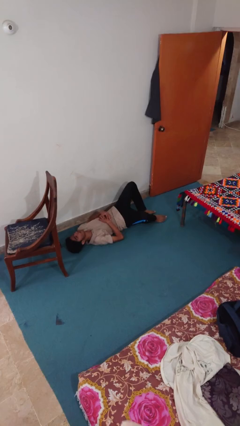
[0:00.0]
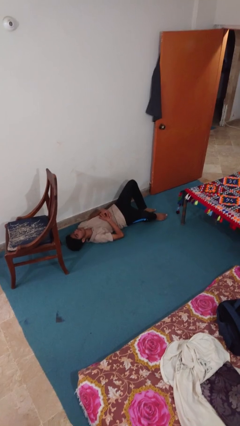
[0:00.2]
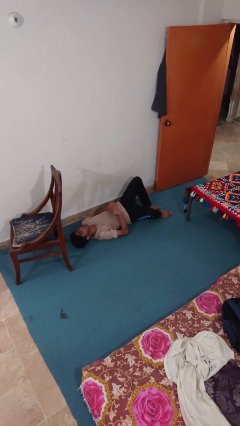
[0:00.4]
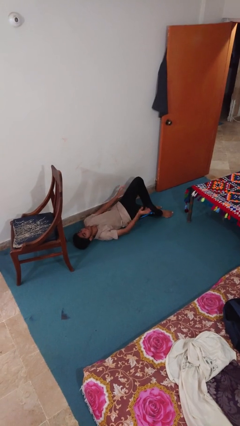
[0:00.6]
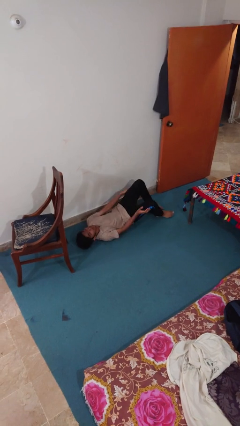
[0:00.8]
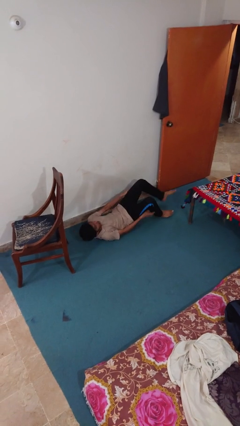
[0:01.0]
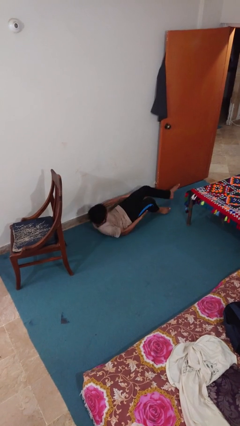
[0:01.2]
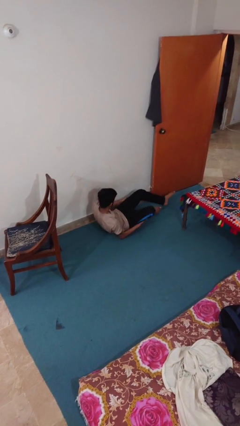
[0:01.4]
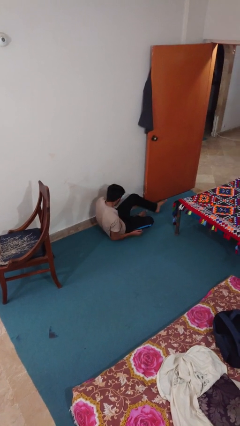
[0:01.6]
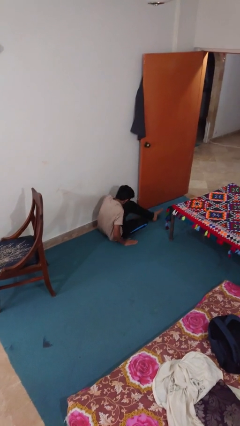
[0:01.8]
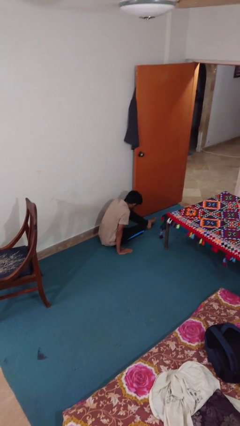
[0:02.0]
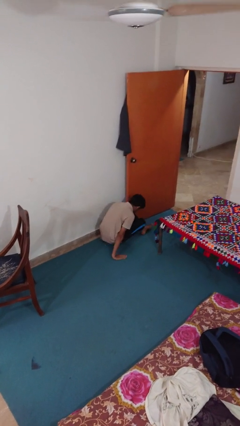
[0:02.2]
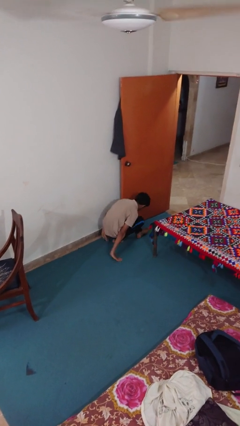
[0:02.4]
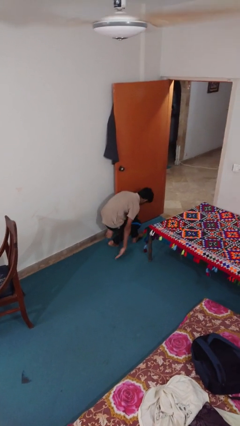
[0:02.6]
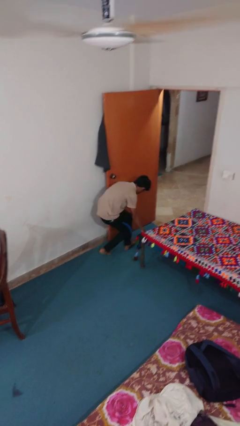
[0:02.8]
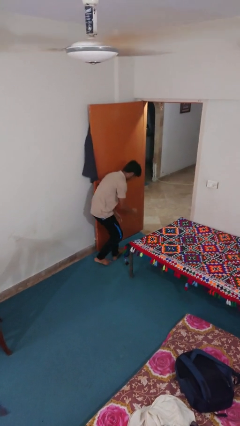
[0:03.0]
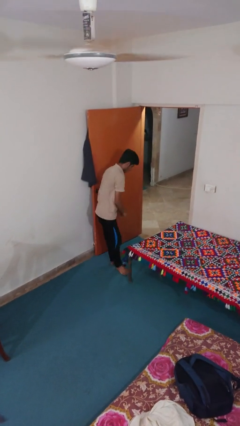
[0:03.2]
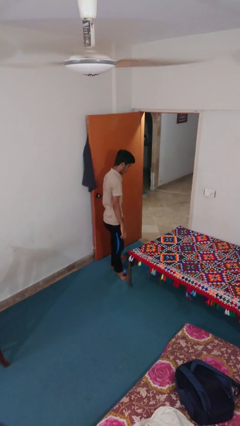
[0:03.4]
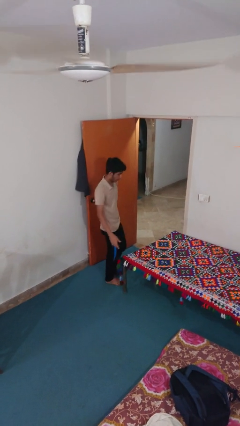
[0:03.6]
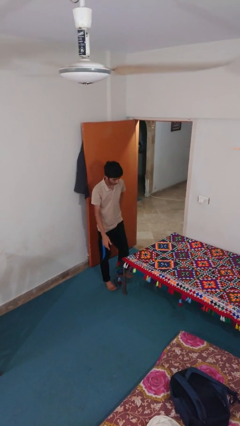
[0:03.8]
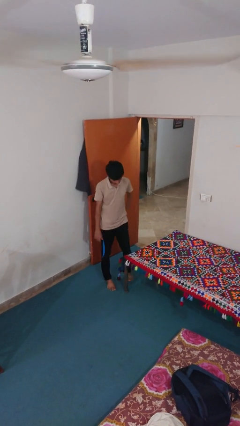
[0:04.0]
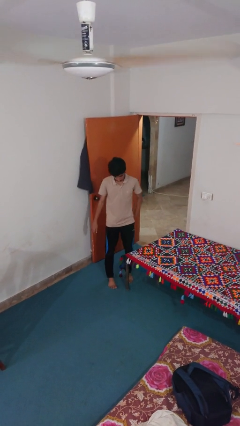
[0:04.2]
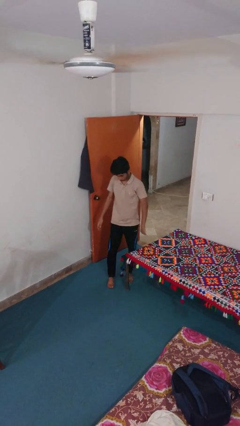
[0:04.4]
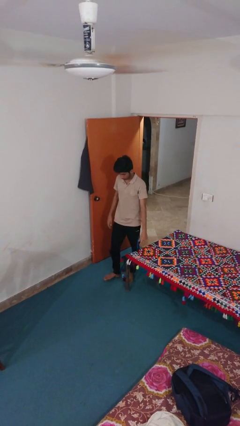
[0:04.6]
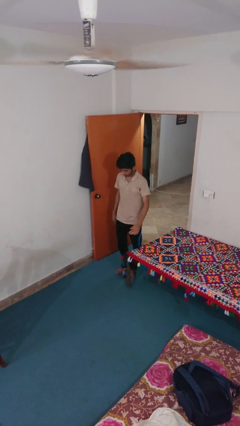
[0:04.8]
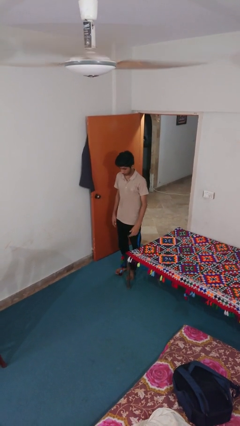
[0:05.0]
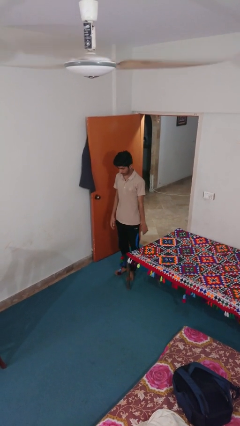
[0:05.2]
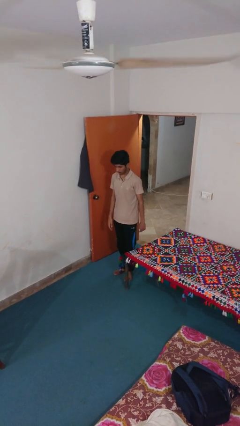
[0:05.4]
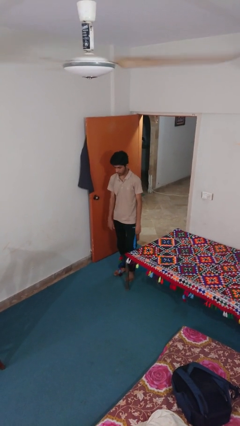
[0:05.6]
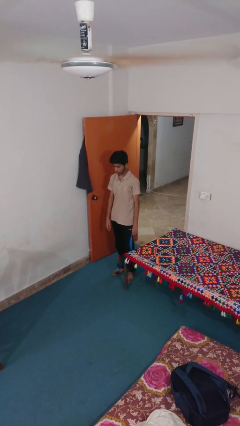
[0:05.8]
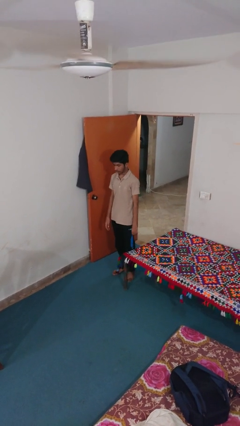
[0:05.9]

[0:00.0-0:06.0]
person stands up from floor

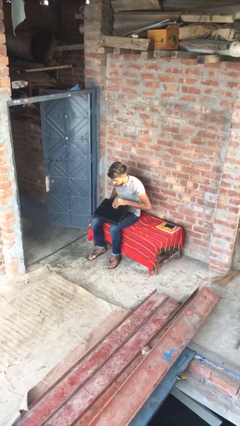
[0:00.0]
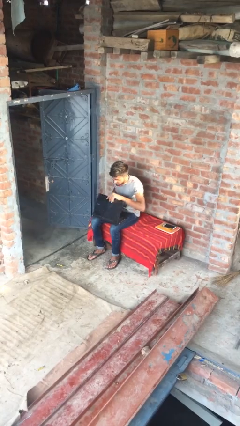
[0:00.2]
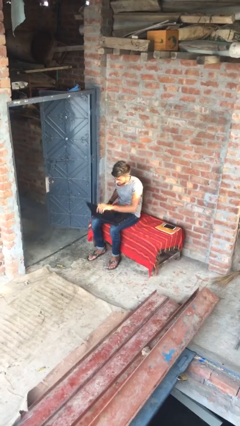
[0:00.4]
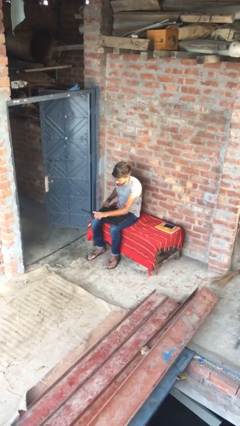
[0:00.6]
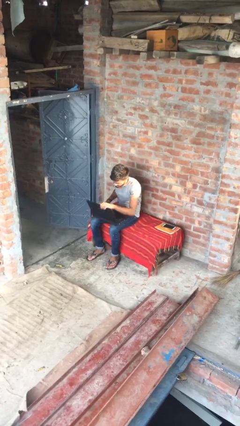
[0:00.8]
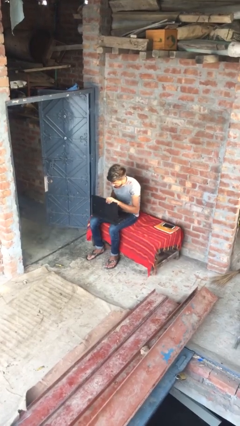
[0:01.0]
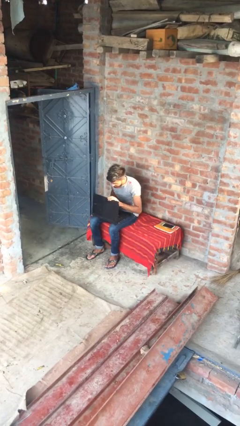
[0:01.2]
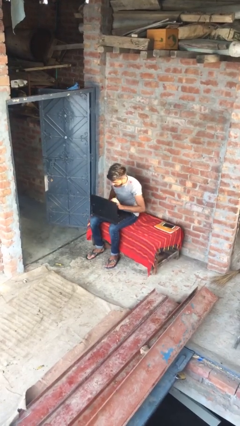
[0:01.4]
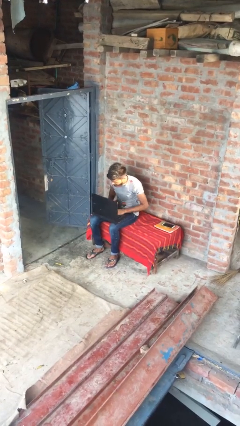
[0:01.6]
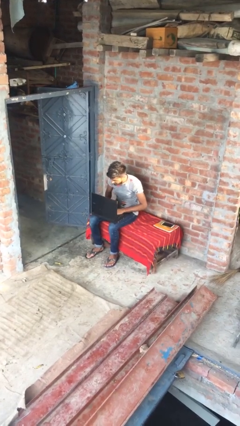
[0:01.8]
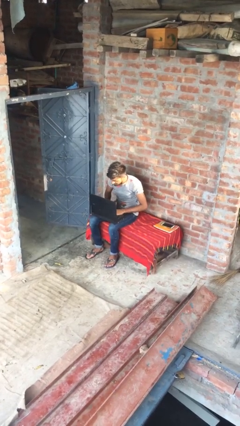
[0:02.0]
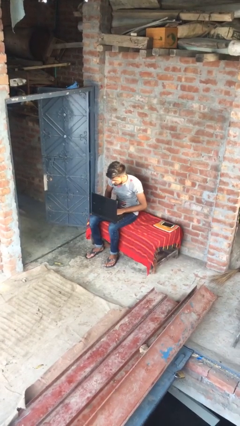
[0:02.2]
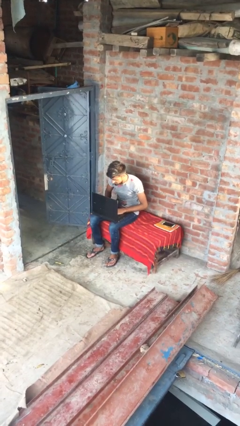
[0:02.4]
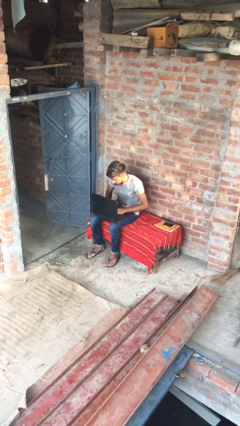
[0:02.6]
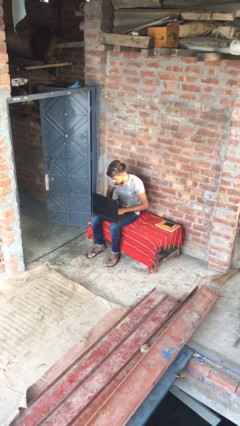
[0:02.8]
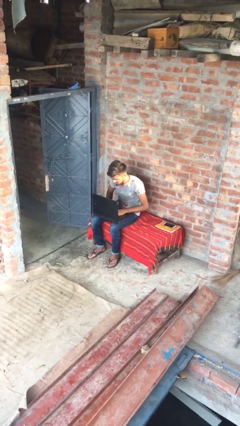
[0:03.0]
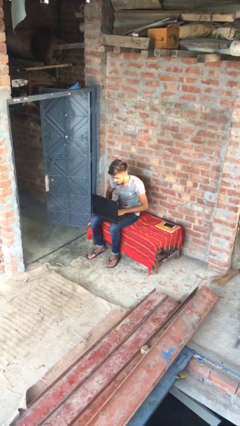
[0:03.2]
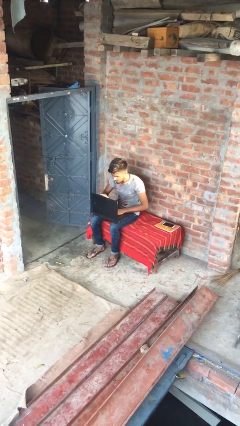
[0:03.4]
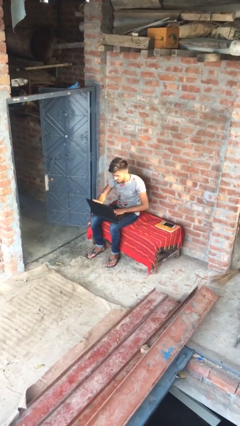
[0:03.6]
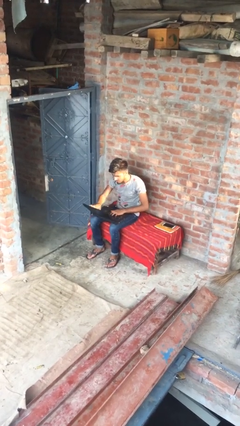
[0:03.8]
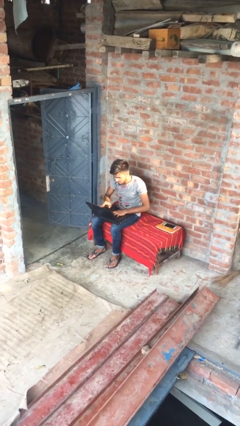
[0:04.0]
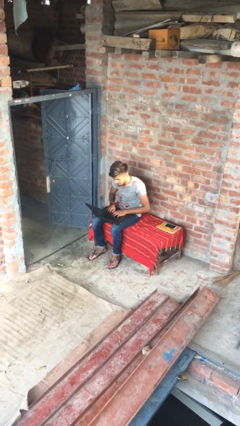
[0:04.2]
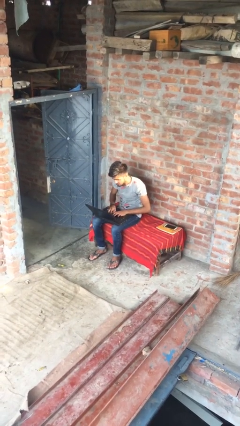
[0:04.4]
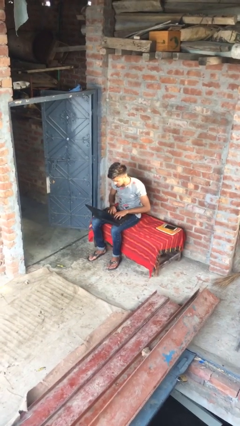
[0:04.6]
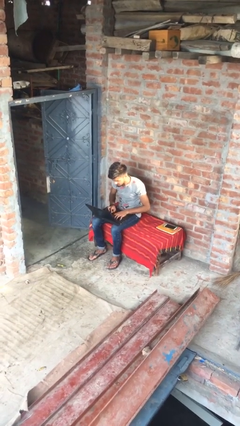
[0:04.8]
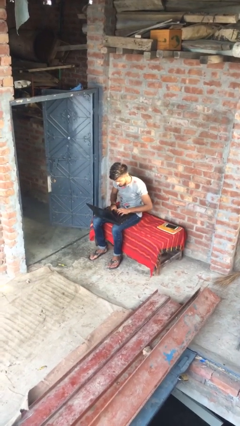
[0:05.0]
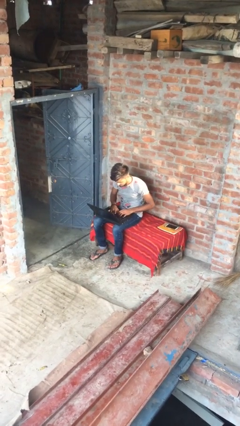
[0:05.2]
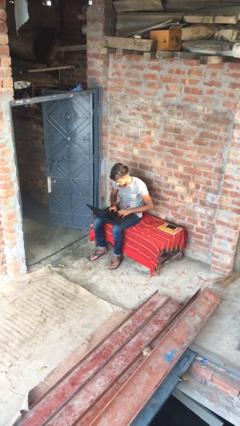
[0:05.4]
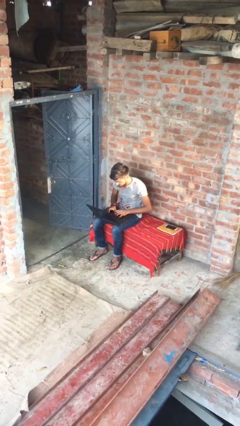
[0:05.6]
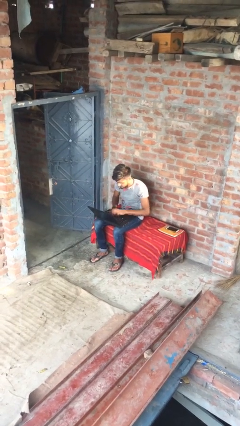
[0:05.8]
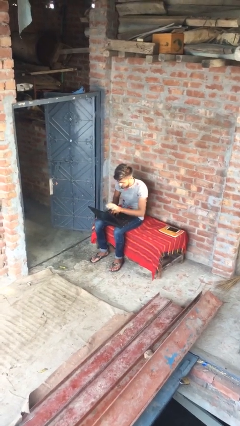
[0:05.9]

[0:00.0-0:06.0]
person interacts with laptop

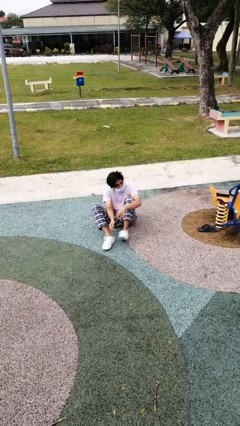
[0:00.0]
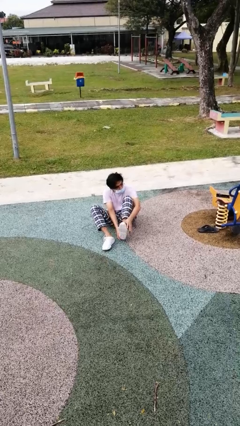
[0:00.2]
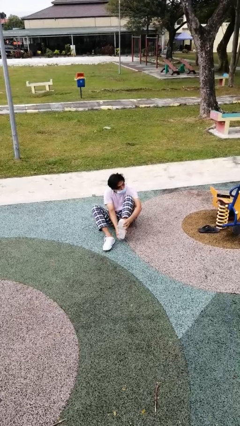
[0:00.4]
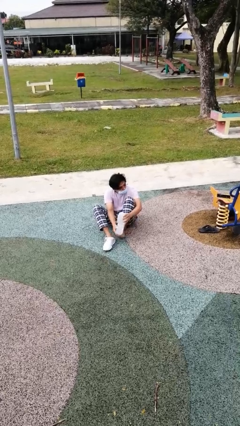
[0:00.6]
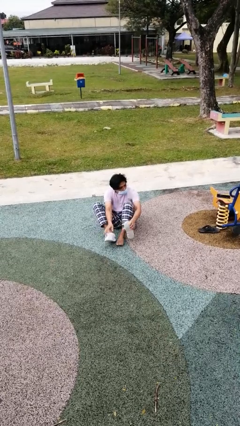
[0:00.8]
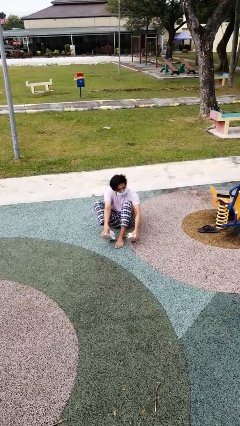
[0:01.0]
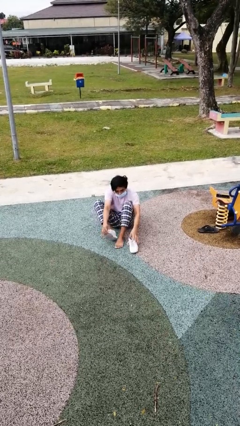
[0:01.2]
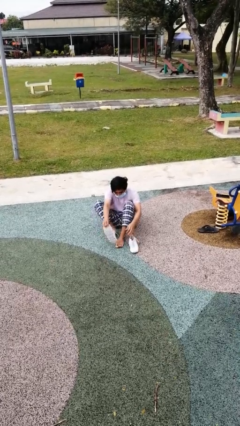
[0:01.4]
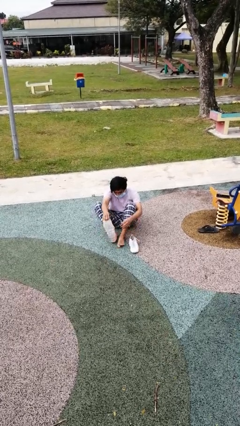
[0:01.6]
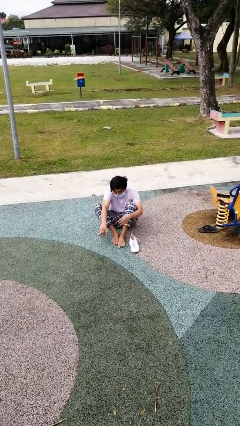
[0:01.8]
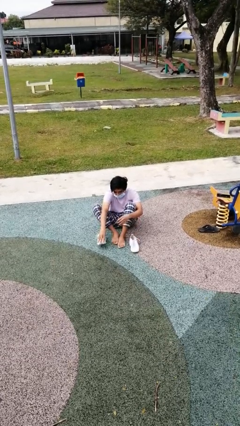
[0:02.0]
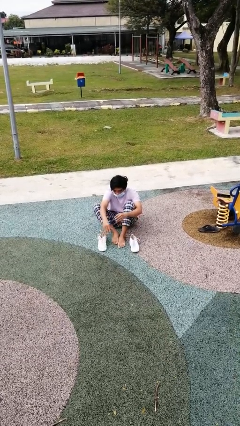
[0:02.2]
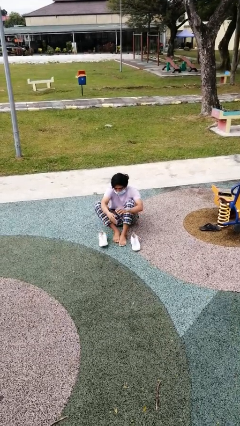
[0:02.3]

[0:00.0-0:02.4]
person takes off shoes

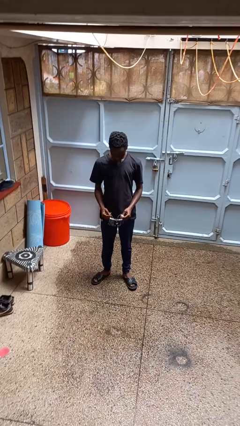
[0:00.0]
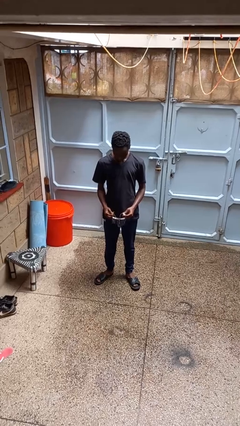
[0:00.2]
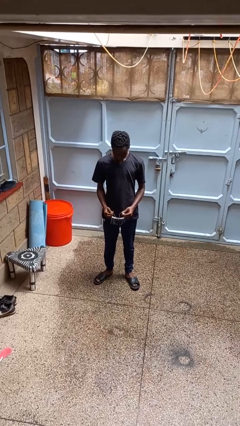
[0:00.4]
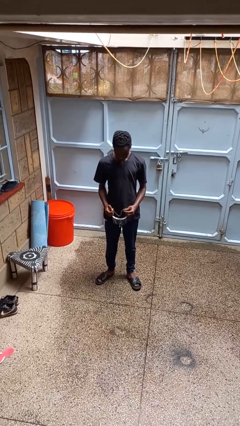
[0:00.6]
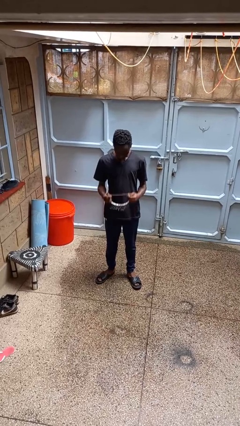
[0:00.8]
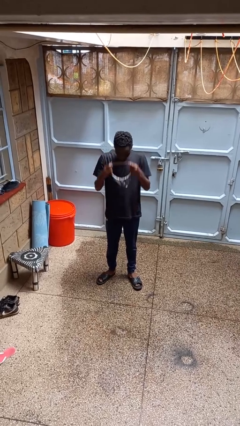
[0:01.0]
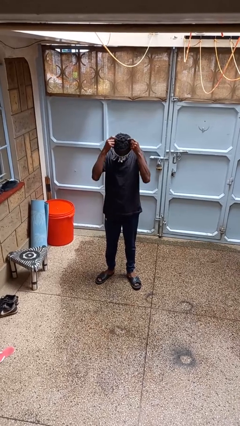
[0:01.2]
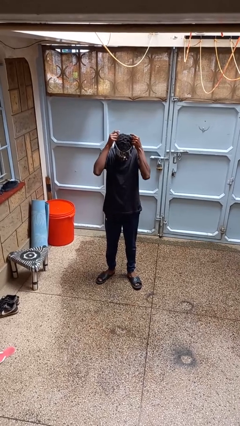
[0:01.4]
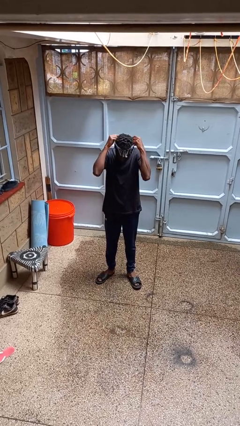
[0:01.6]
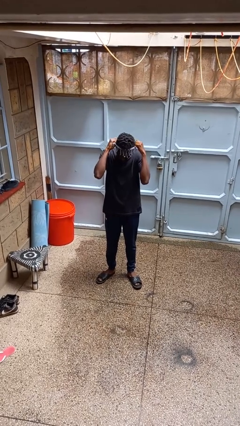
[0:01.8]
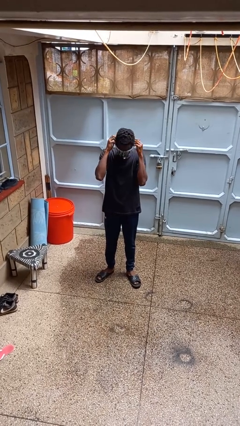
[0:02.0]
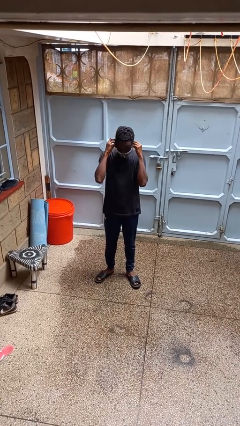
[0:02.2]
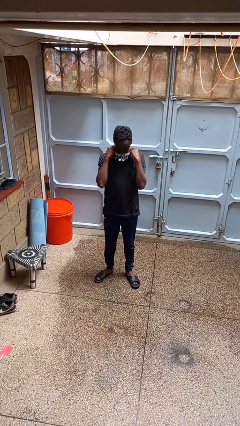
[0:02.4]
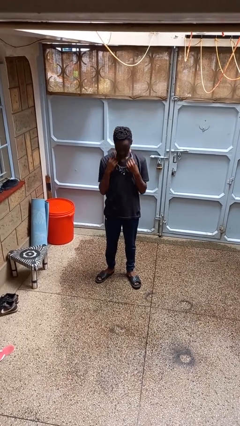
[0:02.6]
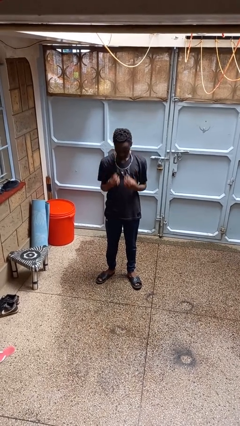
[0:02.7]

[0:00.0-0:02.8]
person puts on necklace

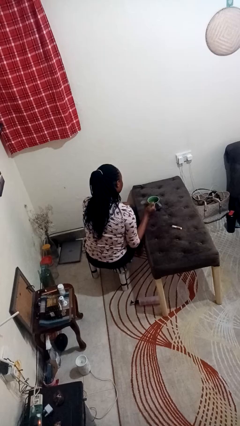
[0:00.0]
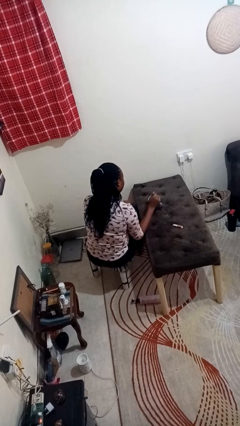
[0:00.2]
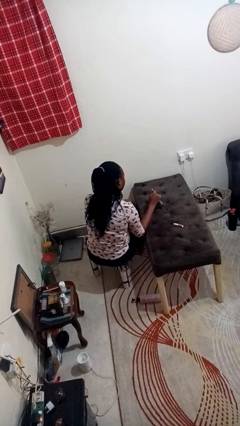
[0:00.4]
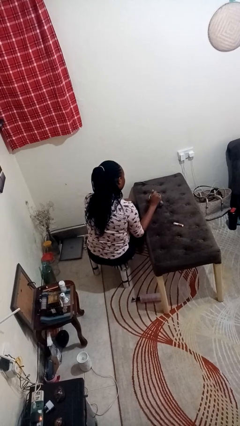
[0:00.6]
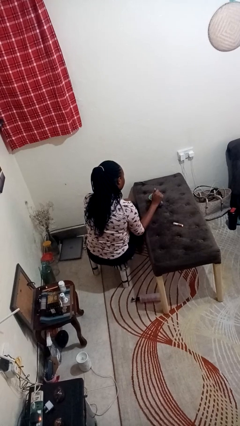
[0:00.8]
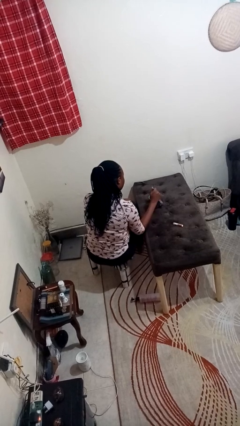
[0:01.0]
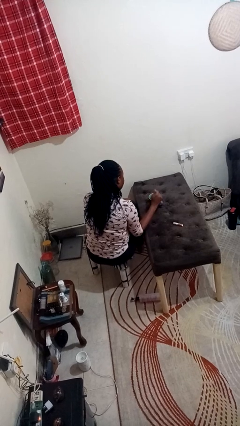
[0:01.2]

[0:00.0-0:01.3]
person stirs mug
